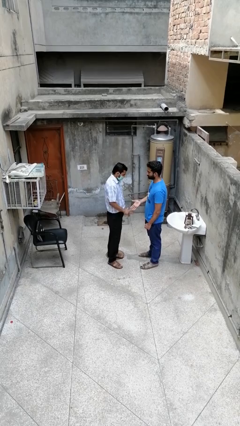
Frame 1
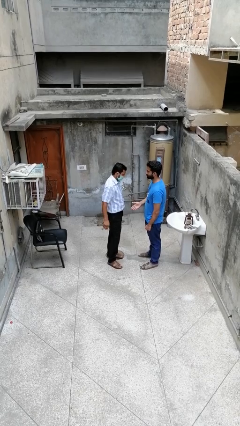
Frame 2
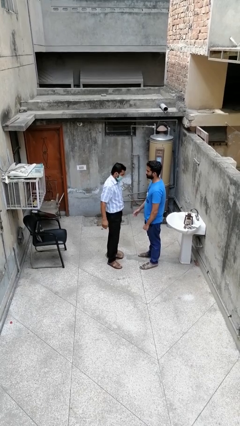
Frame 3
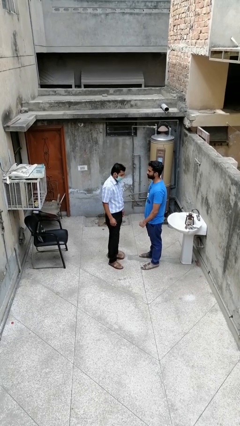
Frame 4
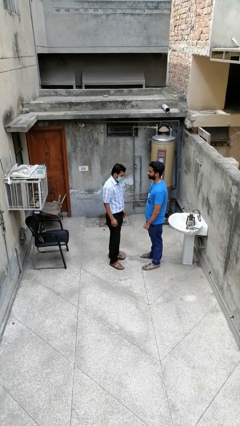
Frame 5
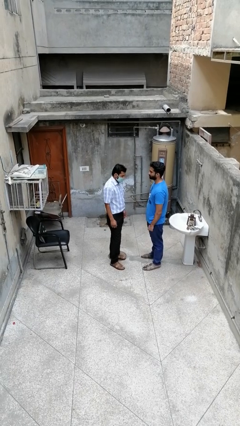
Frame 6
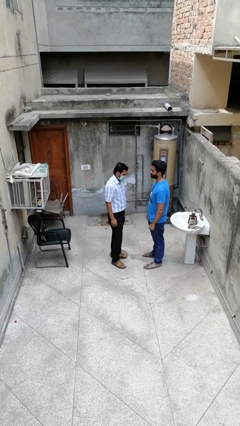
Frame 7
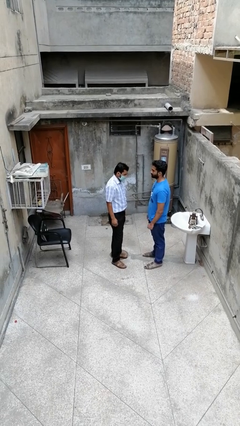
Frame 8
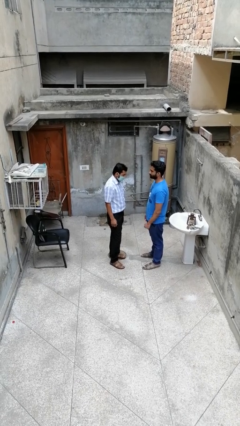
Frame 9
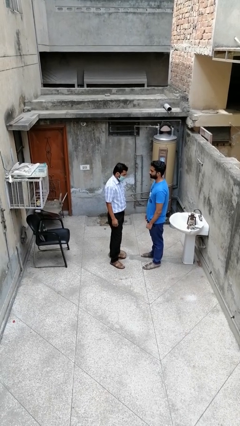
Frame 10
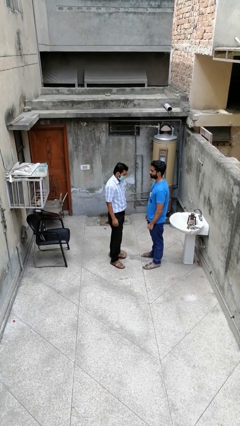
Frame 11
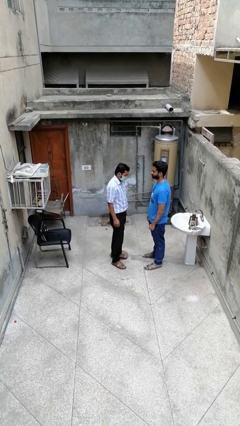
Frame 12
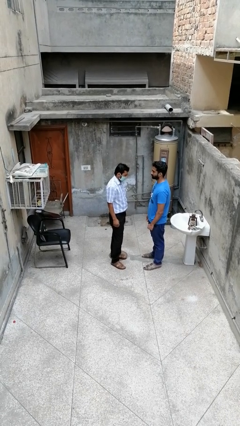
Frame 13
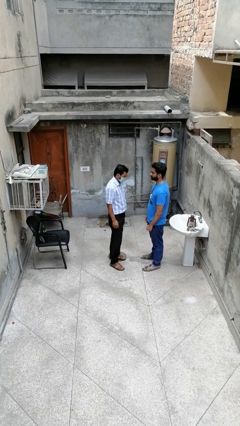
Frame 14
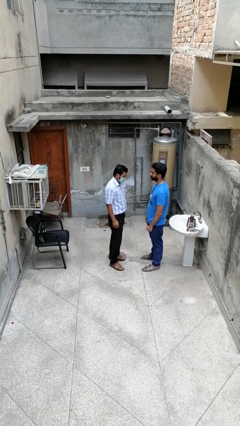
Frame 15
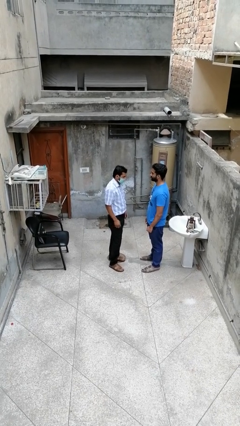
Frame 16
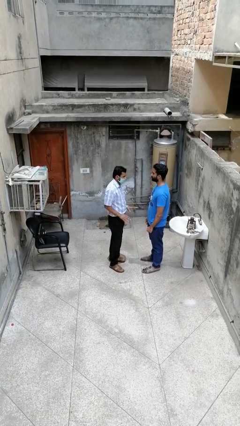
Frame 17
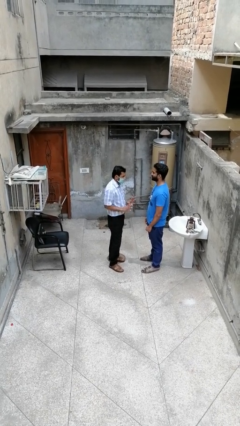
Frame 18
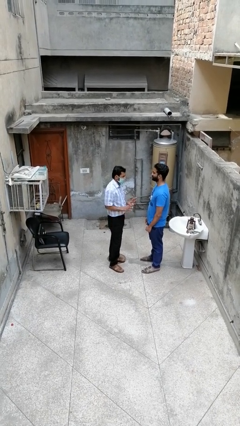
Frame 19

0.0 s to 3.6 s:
person highfives hand

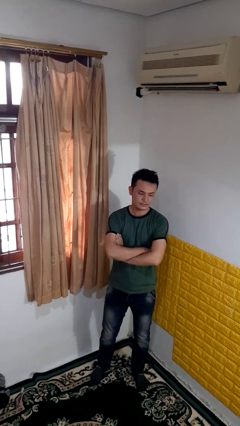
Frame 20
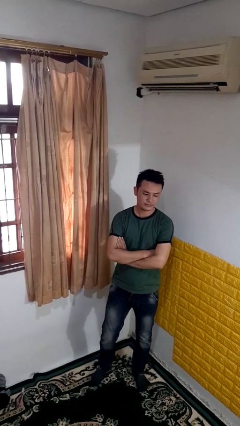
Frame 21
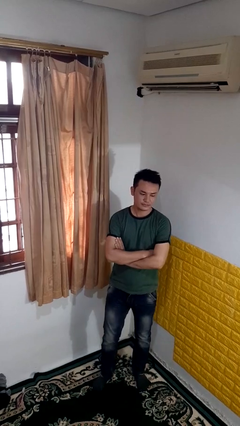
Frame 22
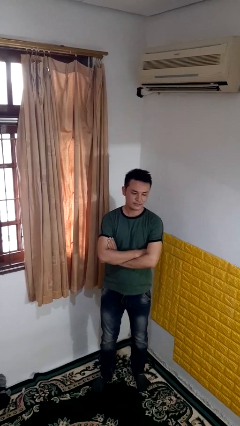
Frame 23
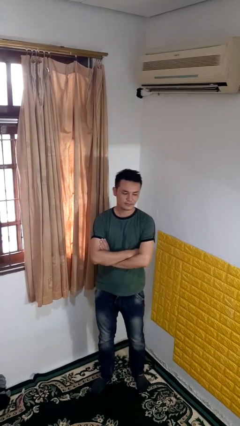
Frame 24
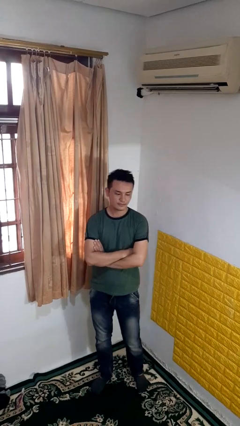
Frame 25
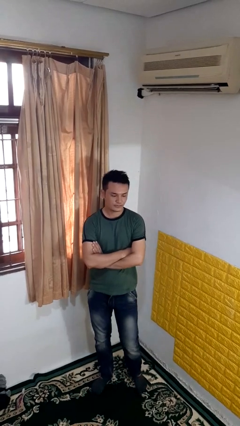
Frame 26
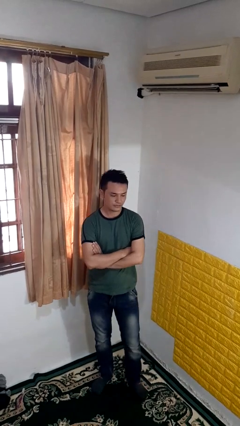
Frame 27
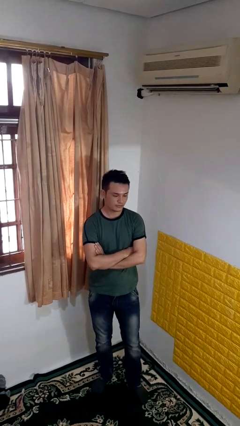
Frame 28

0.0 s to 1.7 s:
person crosses arms

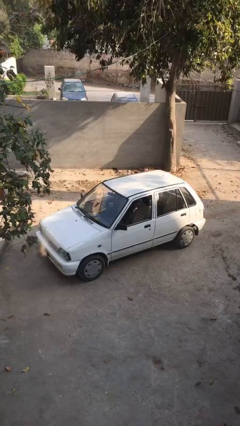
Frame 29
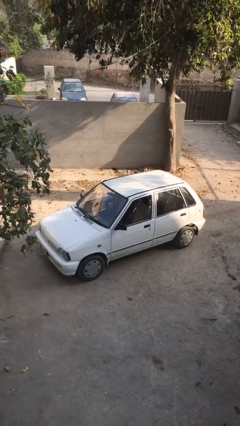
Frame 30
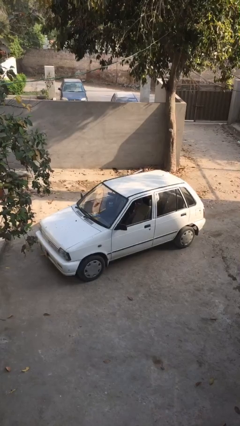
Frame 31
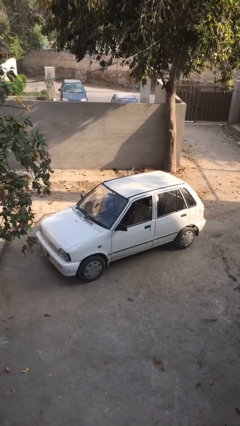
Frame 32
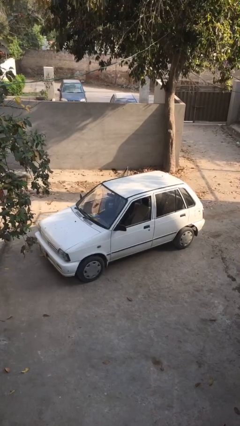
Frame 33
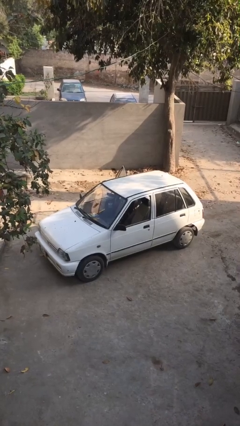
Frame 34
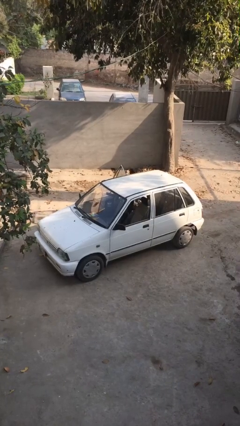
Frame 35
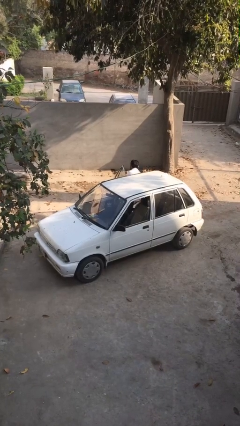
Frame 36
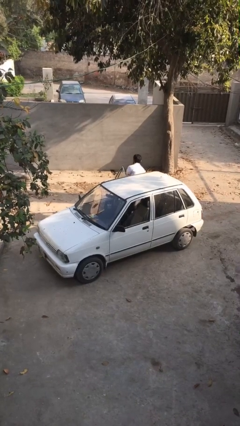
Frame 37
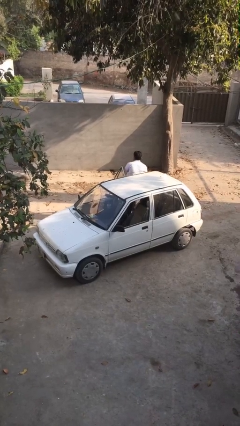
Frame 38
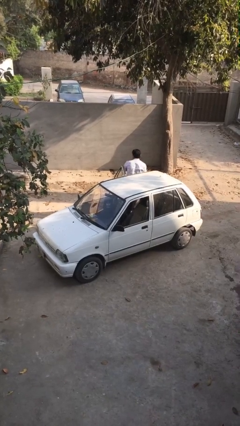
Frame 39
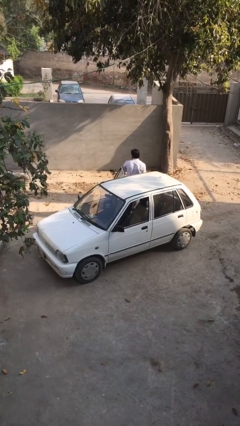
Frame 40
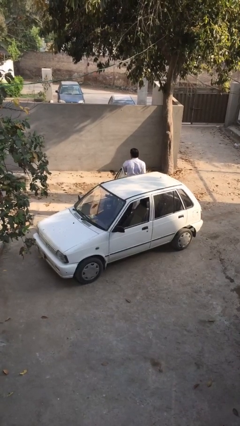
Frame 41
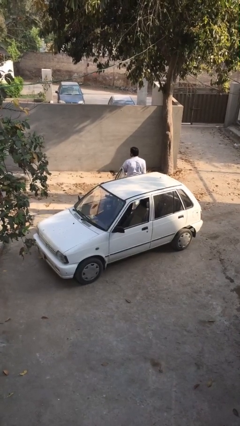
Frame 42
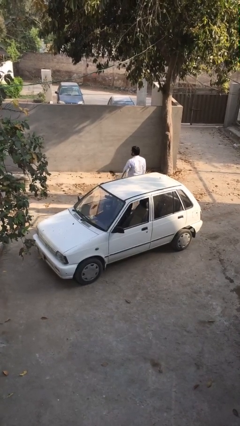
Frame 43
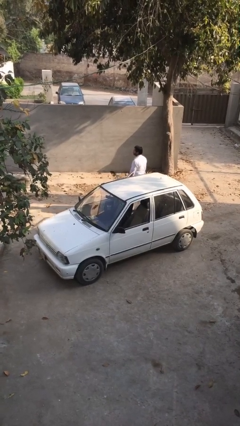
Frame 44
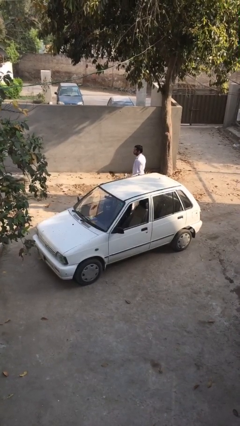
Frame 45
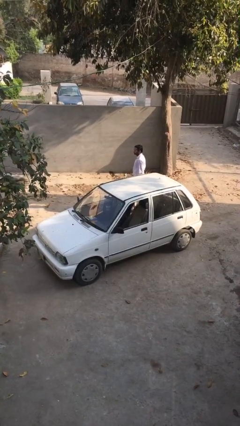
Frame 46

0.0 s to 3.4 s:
car drops off person

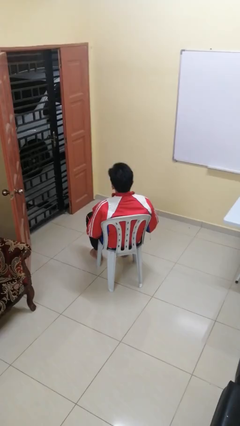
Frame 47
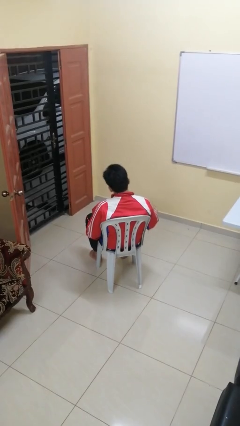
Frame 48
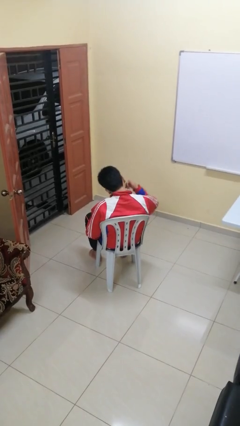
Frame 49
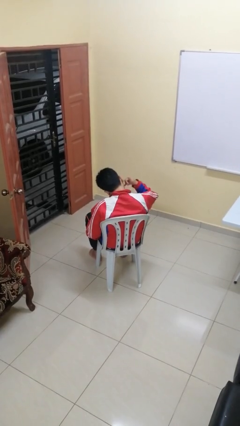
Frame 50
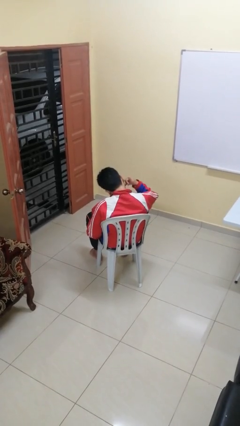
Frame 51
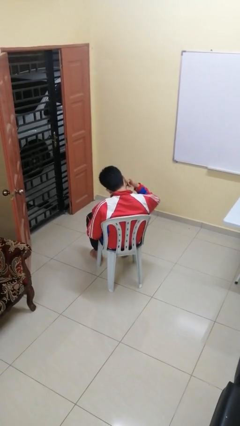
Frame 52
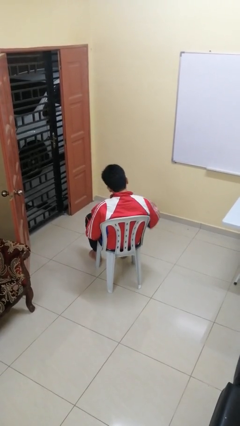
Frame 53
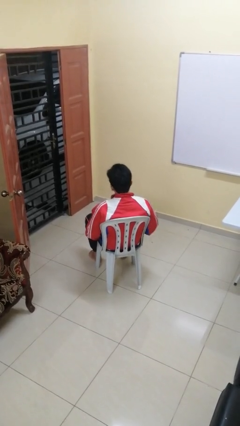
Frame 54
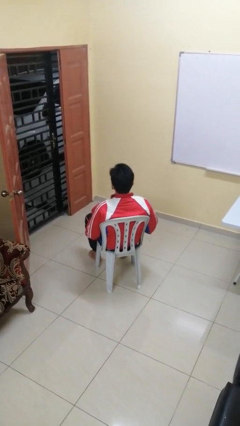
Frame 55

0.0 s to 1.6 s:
person gestures call me

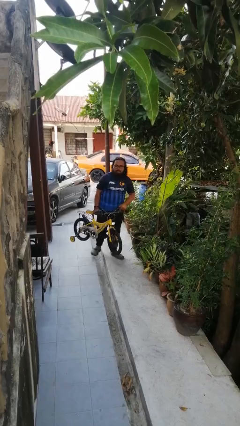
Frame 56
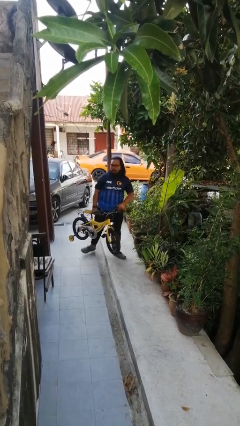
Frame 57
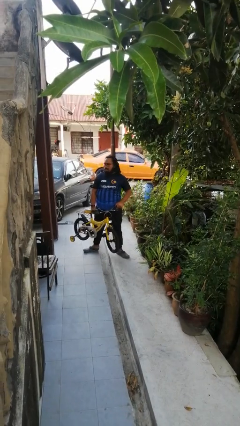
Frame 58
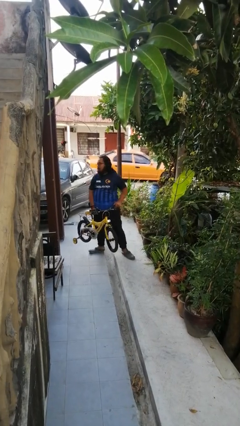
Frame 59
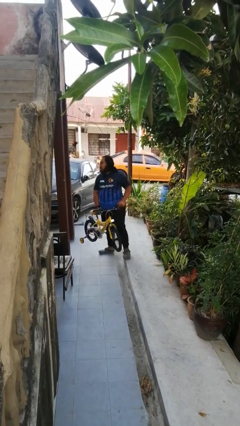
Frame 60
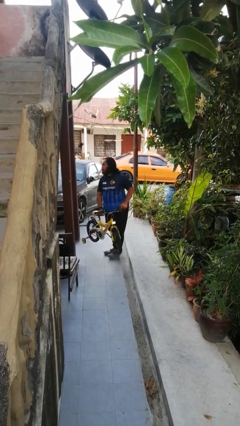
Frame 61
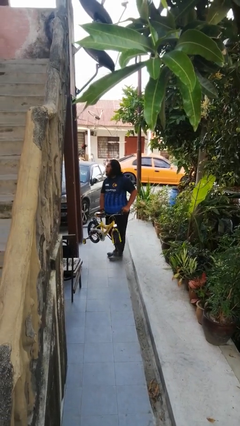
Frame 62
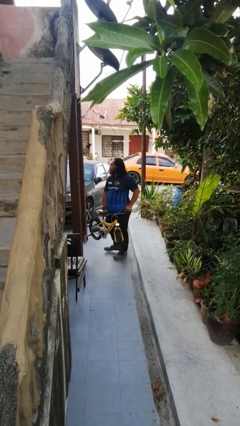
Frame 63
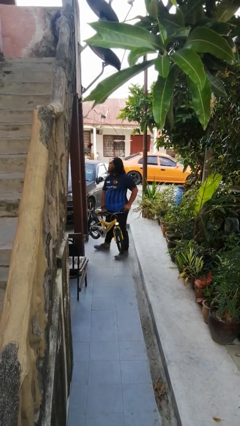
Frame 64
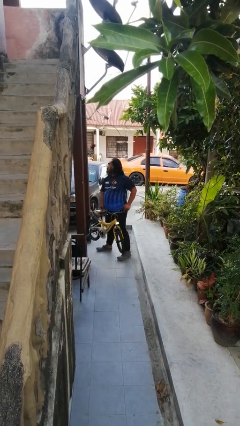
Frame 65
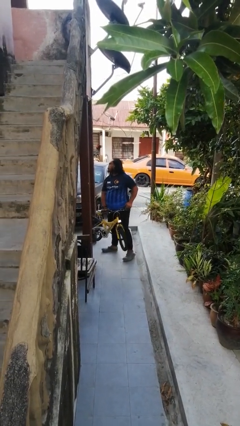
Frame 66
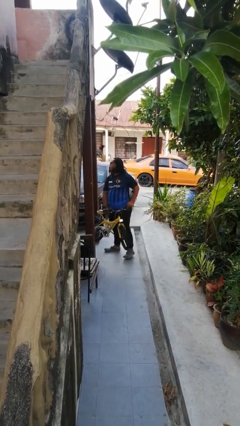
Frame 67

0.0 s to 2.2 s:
person carries bicycle

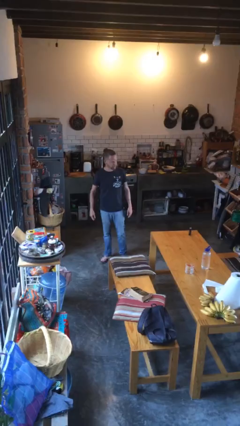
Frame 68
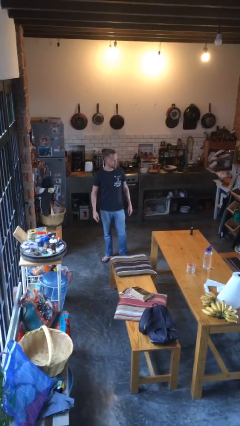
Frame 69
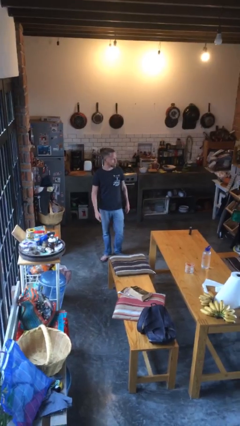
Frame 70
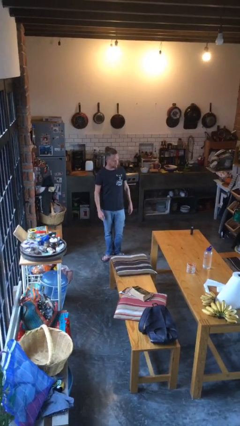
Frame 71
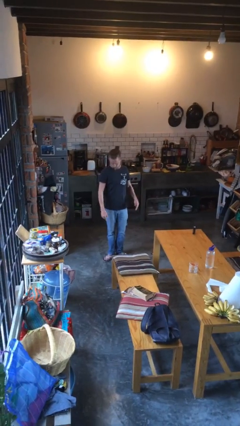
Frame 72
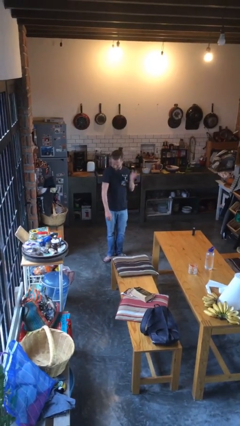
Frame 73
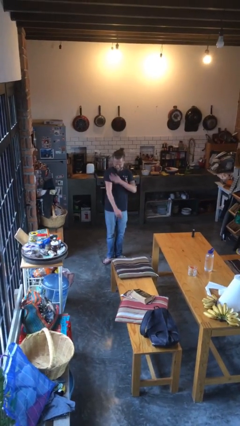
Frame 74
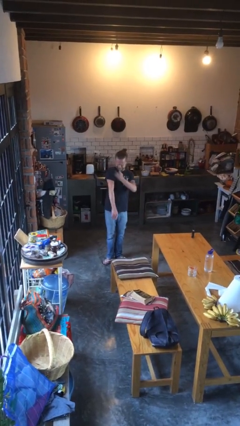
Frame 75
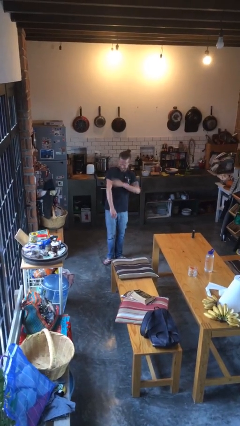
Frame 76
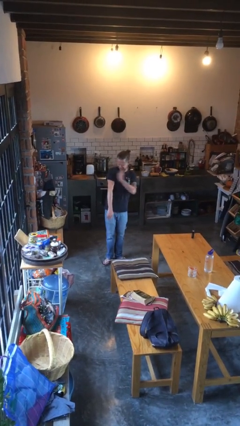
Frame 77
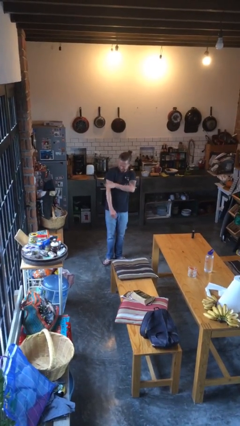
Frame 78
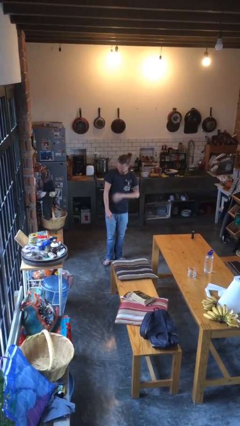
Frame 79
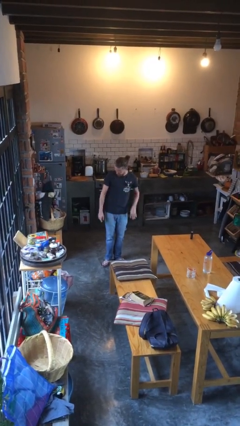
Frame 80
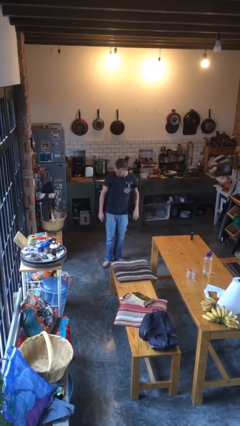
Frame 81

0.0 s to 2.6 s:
person swats bug

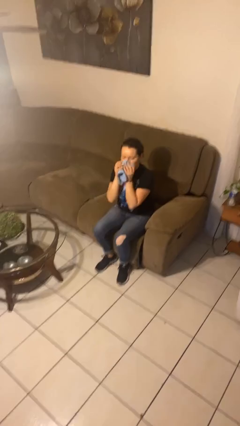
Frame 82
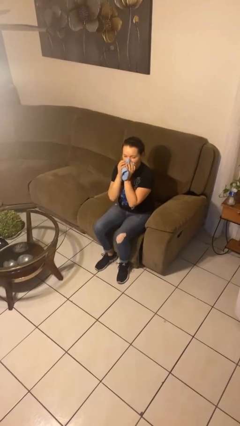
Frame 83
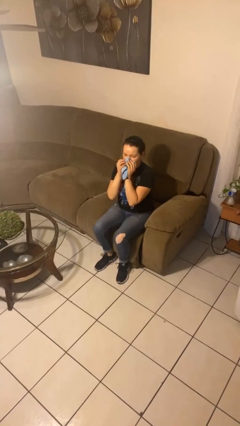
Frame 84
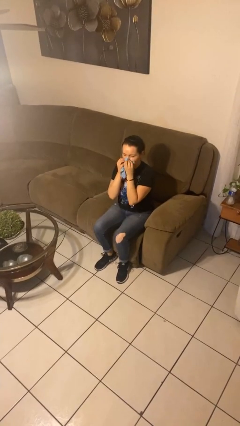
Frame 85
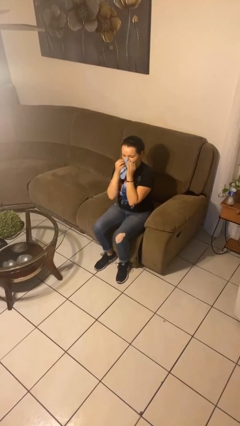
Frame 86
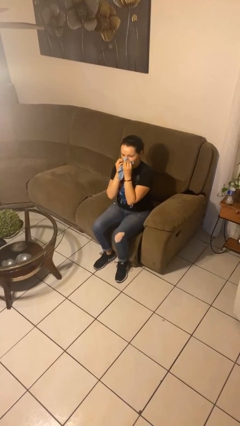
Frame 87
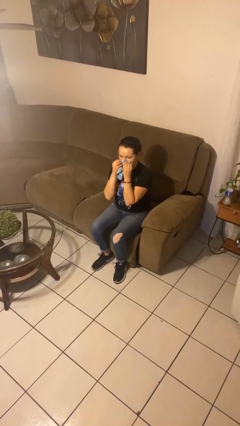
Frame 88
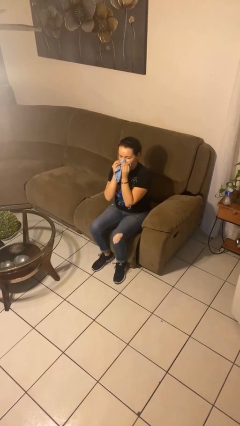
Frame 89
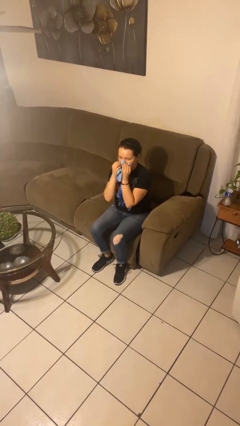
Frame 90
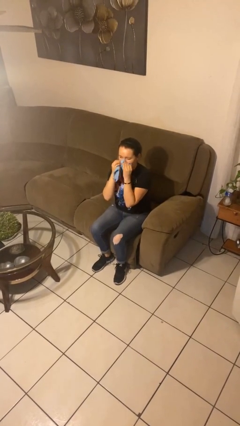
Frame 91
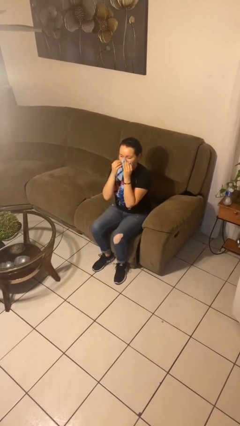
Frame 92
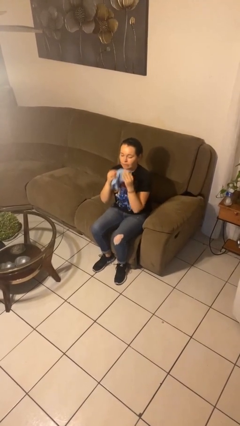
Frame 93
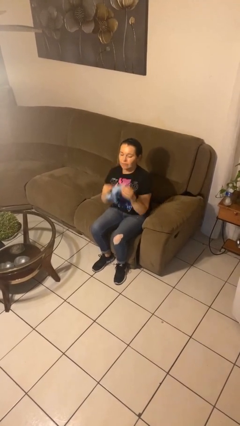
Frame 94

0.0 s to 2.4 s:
person blows nose

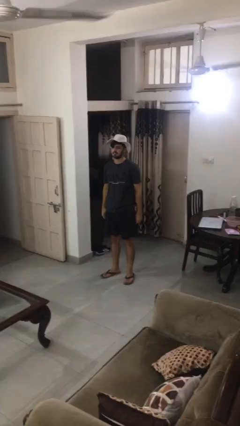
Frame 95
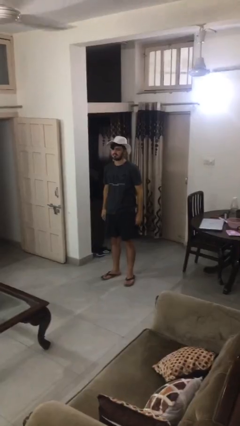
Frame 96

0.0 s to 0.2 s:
person takes off hat
